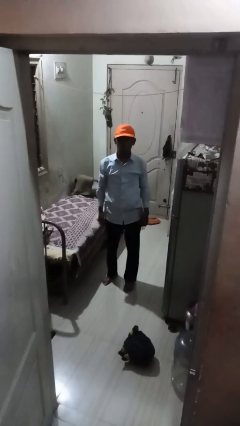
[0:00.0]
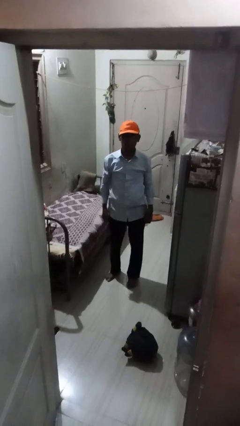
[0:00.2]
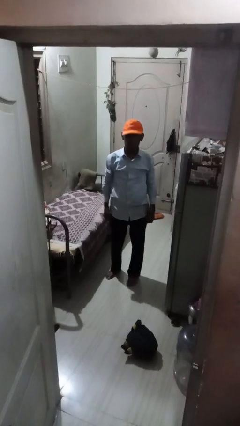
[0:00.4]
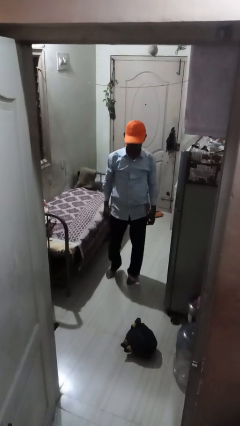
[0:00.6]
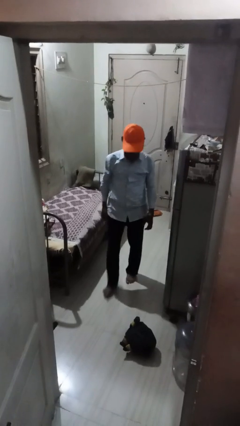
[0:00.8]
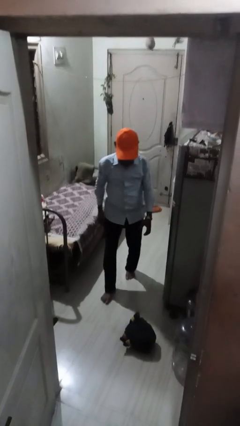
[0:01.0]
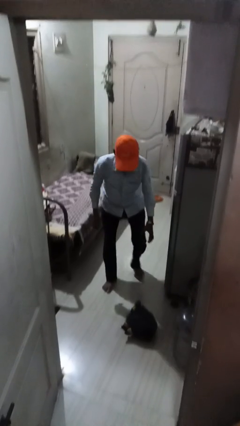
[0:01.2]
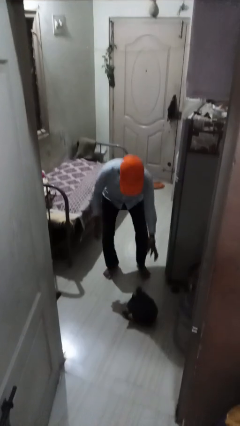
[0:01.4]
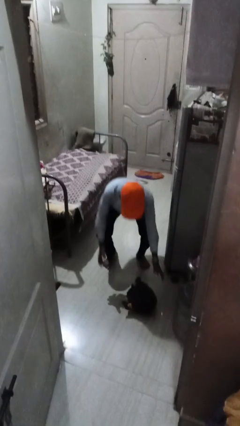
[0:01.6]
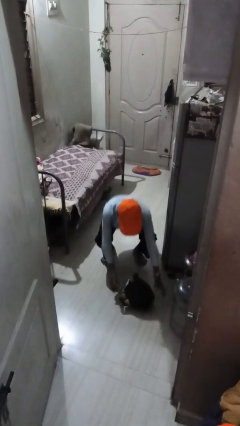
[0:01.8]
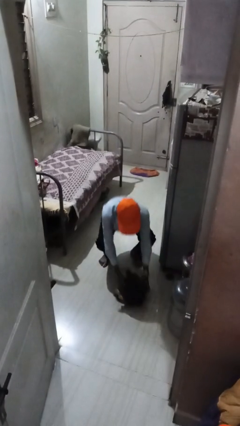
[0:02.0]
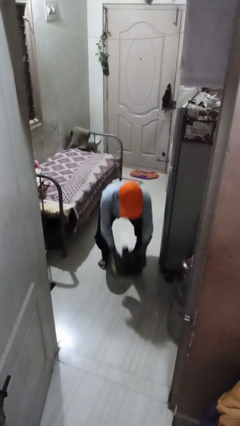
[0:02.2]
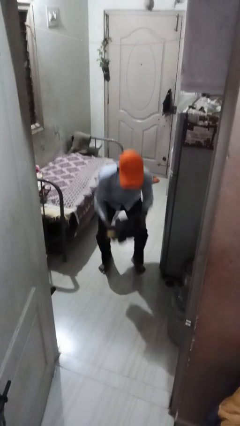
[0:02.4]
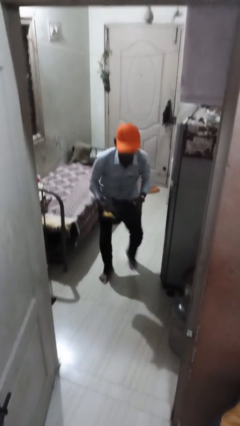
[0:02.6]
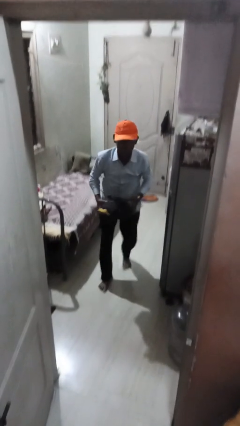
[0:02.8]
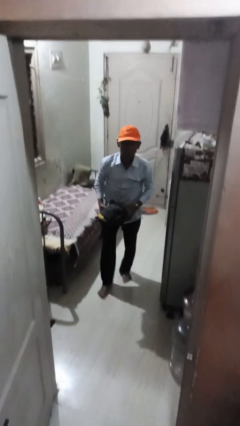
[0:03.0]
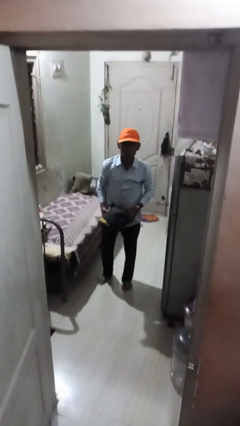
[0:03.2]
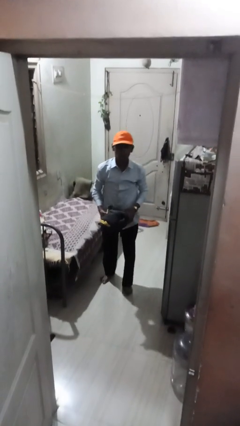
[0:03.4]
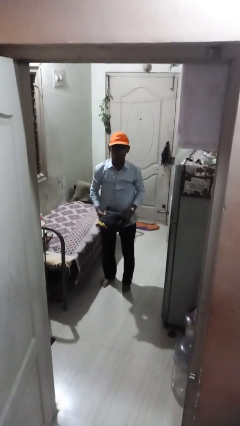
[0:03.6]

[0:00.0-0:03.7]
person picks up object from floor

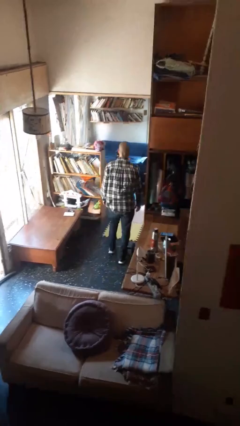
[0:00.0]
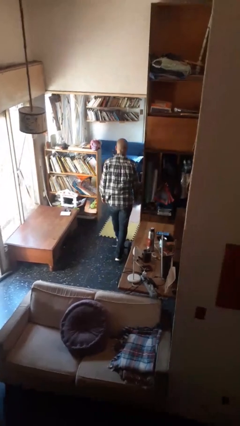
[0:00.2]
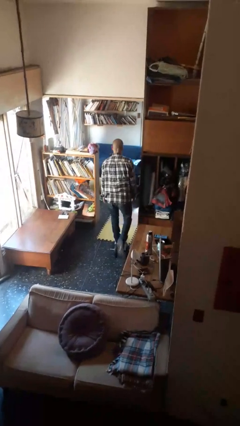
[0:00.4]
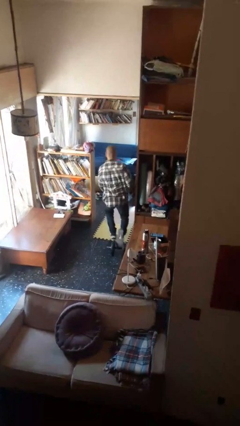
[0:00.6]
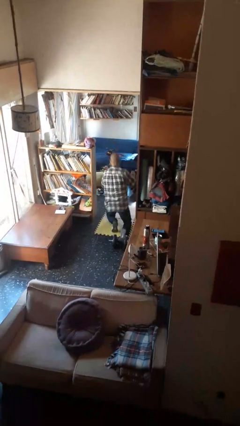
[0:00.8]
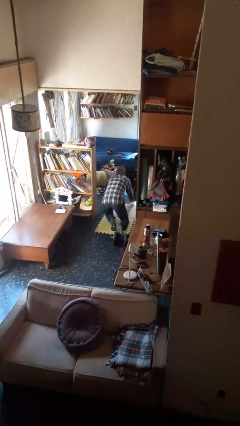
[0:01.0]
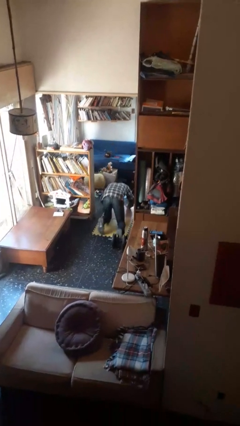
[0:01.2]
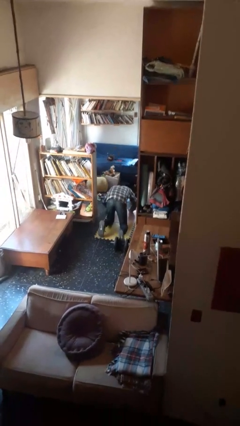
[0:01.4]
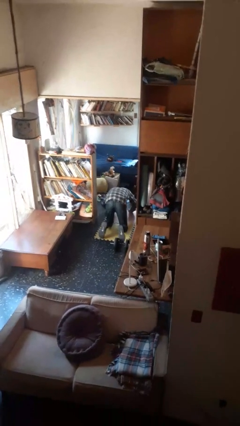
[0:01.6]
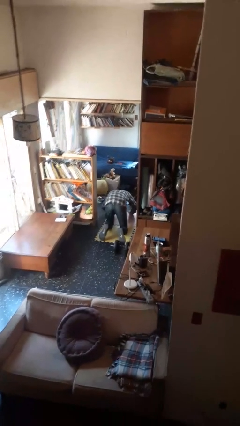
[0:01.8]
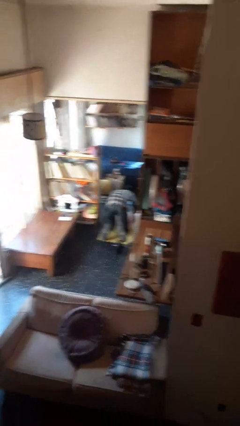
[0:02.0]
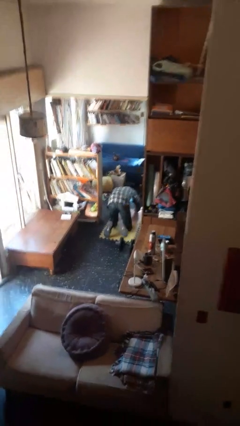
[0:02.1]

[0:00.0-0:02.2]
person trips on object on floor

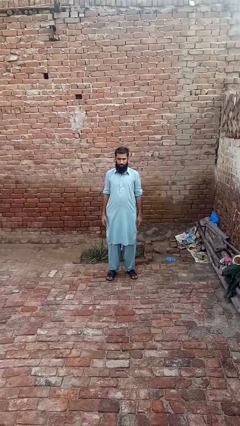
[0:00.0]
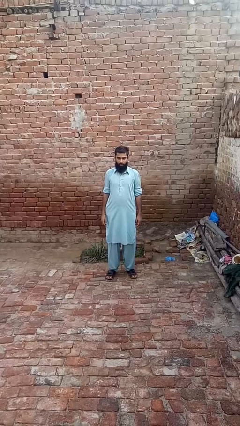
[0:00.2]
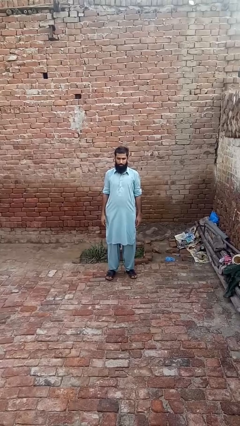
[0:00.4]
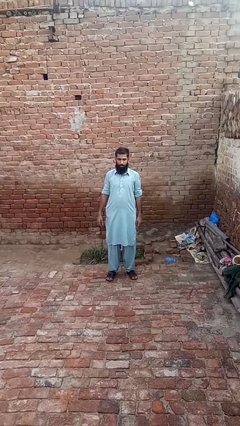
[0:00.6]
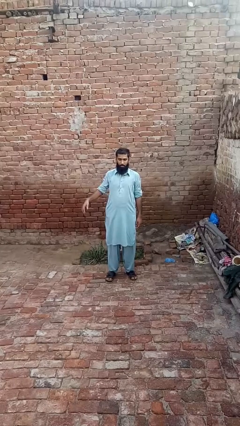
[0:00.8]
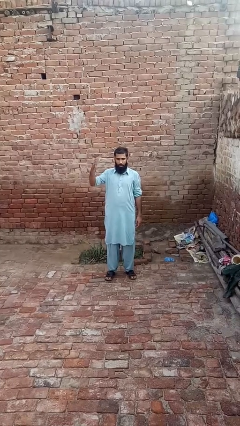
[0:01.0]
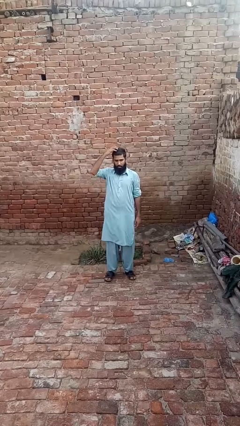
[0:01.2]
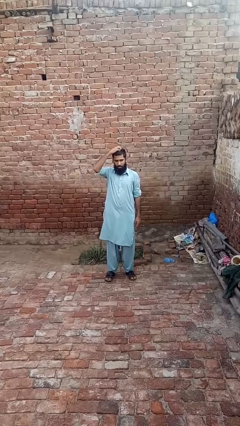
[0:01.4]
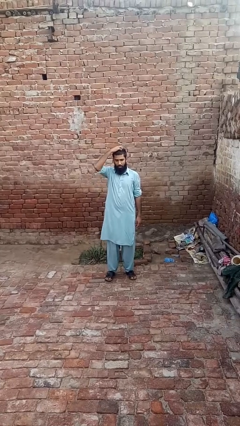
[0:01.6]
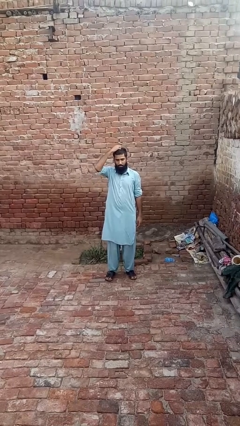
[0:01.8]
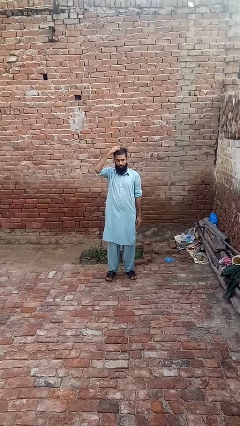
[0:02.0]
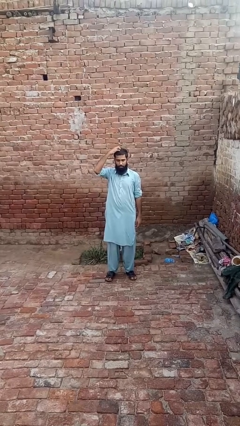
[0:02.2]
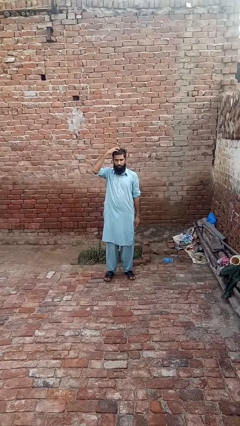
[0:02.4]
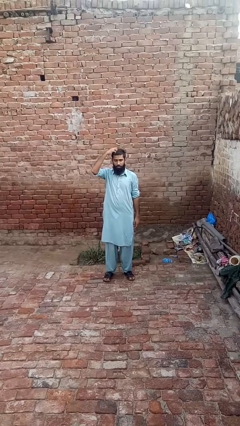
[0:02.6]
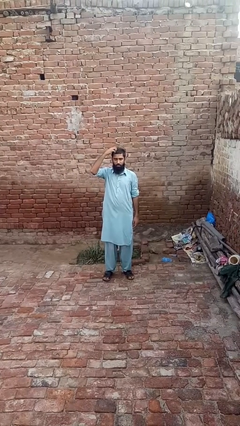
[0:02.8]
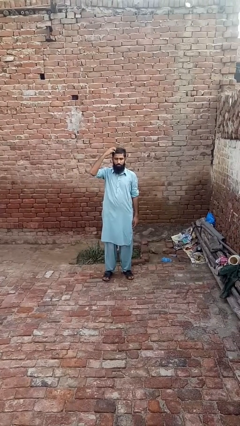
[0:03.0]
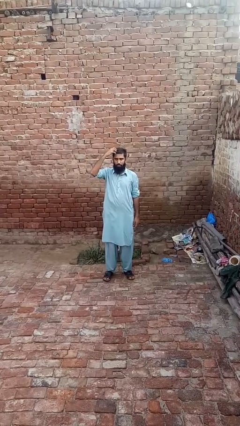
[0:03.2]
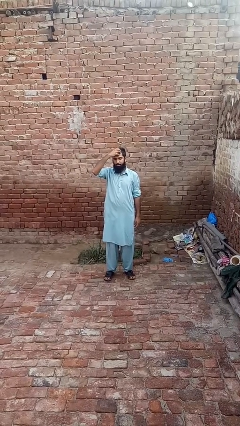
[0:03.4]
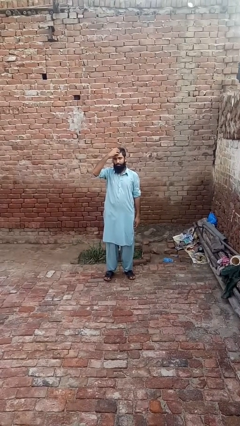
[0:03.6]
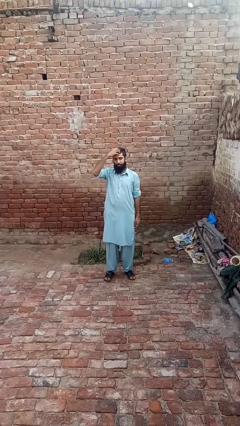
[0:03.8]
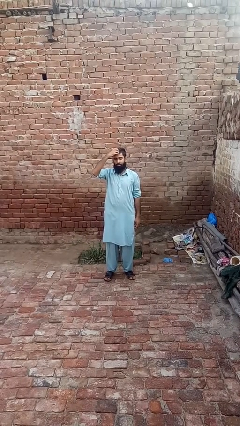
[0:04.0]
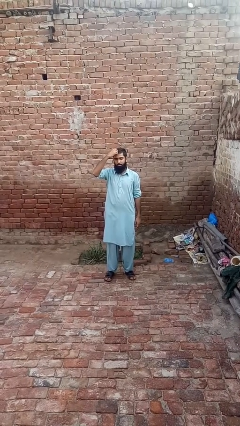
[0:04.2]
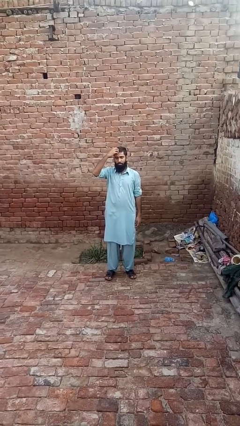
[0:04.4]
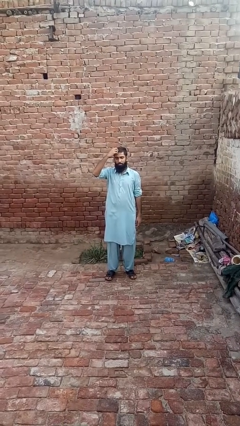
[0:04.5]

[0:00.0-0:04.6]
person scratches face

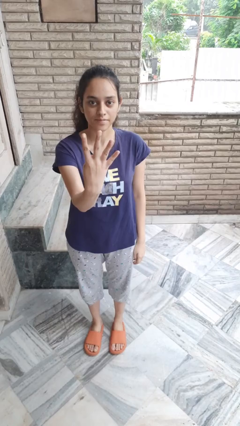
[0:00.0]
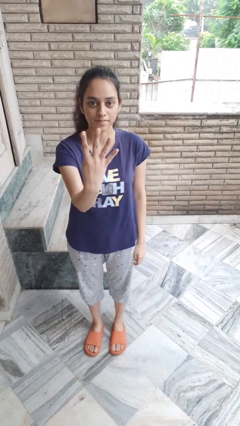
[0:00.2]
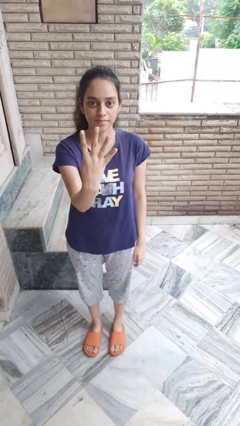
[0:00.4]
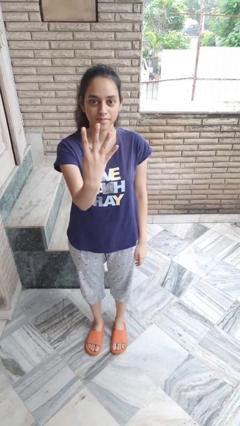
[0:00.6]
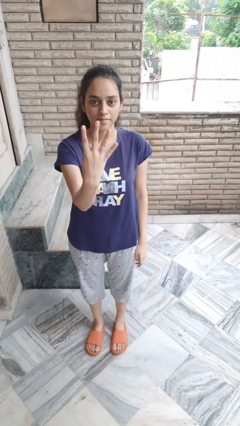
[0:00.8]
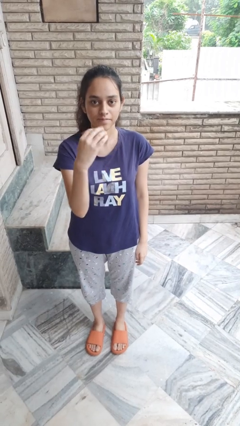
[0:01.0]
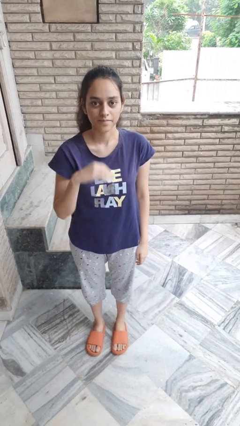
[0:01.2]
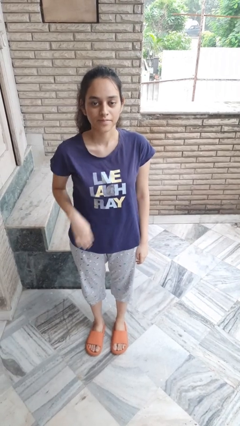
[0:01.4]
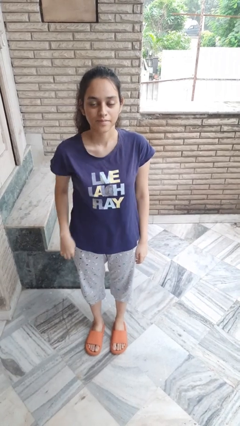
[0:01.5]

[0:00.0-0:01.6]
person gestures number four

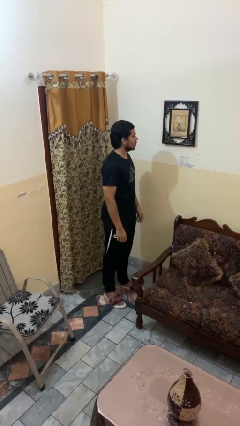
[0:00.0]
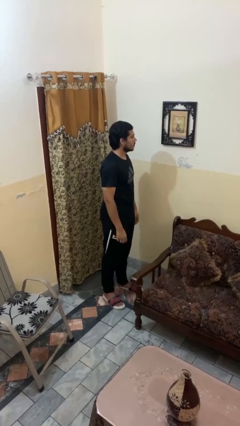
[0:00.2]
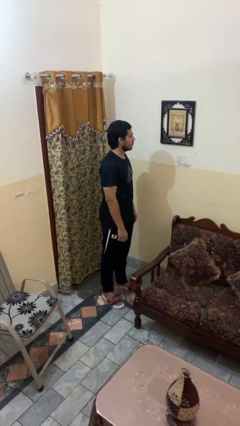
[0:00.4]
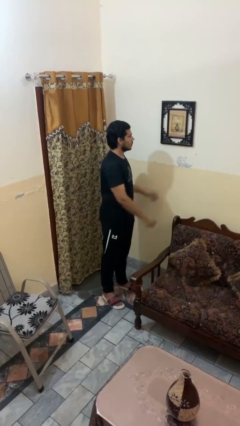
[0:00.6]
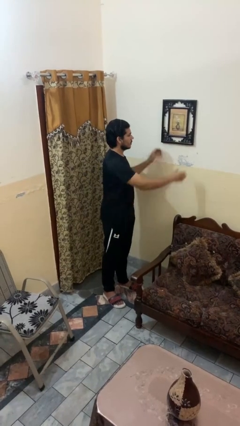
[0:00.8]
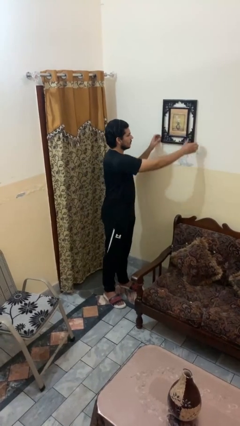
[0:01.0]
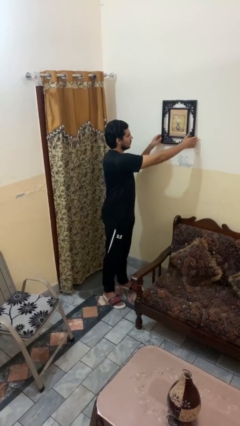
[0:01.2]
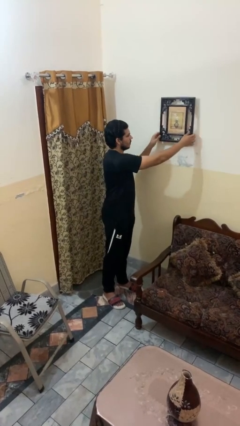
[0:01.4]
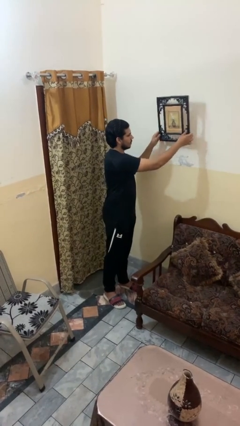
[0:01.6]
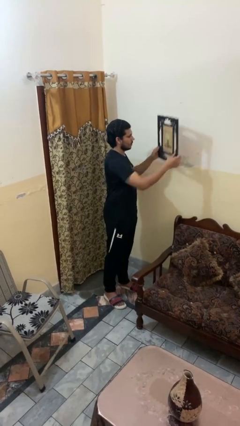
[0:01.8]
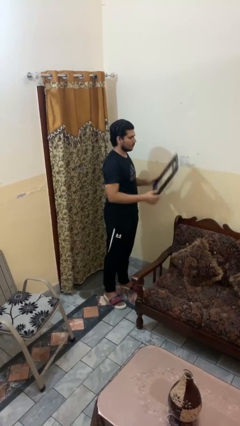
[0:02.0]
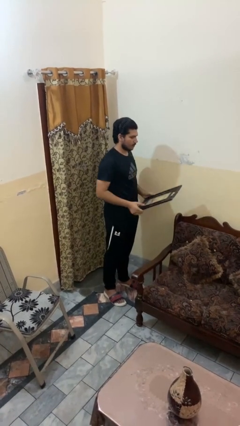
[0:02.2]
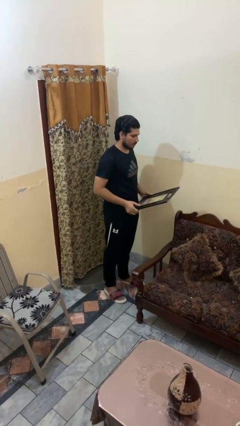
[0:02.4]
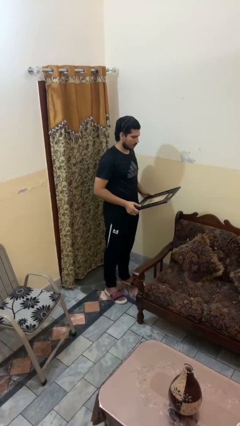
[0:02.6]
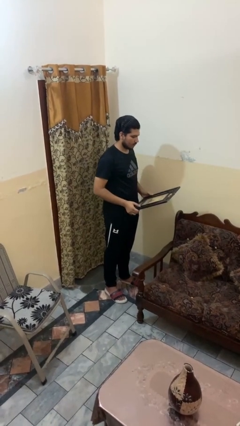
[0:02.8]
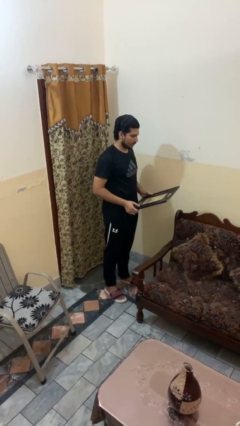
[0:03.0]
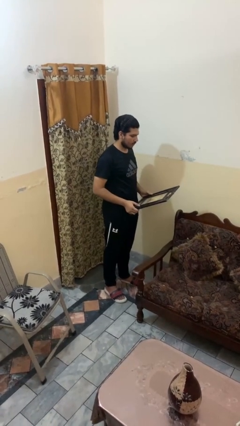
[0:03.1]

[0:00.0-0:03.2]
person takes down picture frame

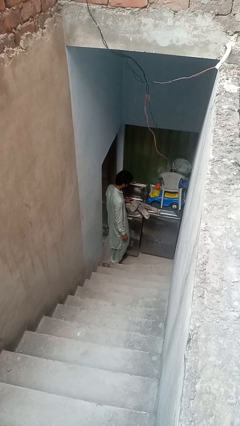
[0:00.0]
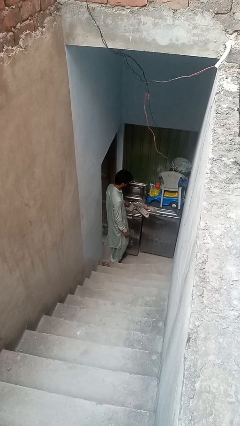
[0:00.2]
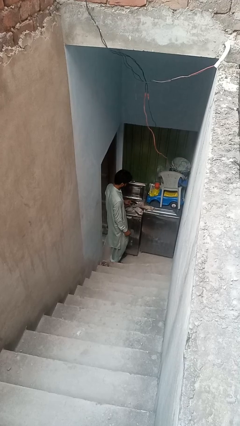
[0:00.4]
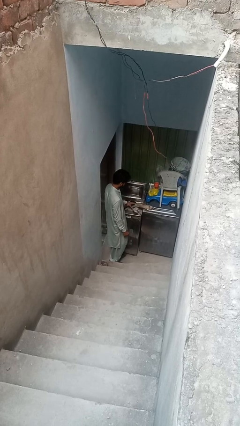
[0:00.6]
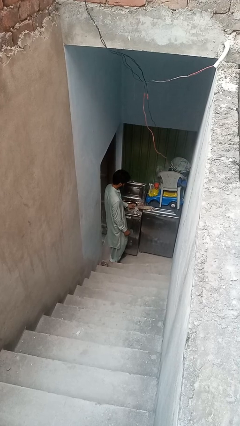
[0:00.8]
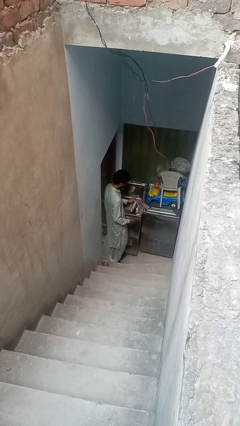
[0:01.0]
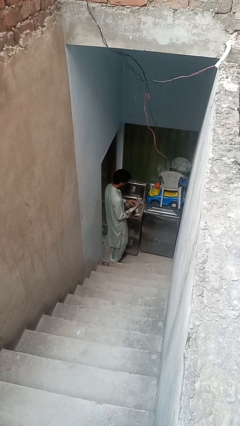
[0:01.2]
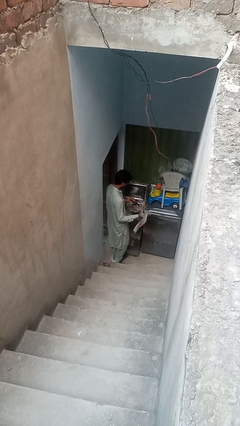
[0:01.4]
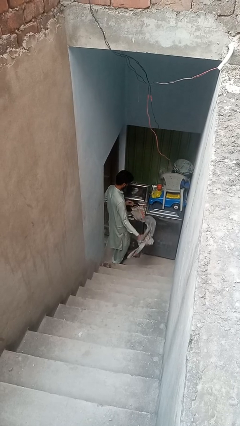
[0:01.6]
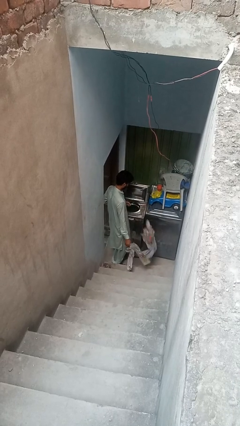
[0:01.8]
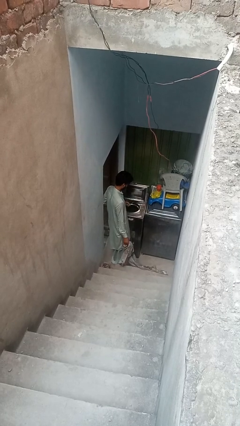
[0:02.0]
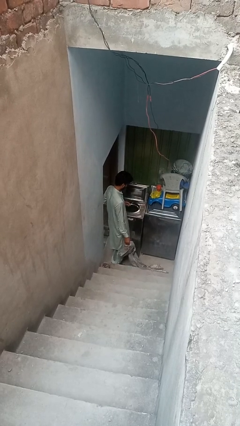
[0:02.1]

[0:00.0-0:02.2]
person unloads clotheswasher

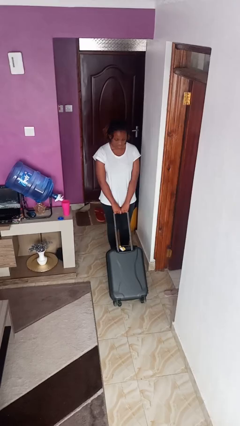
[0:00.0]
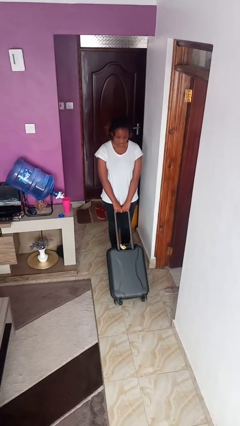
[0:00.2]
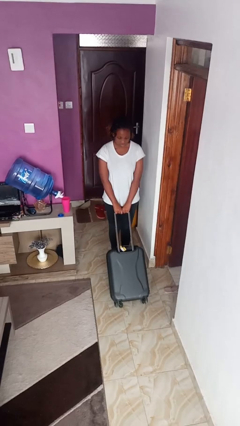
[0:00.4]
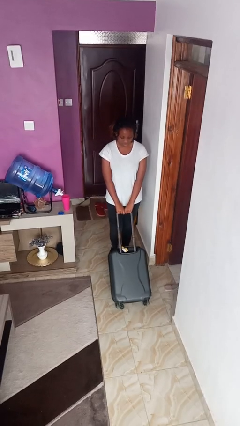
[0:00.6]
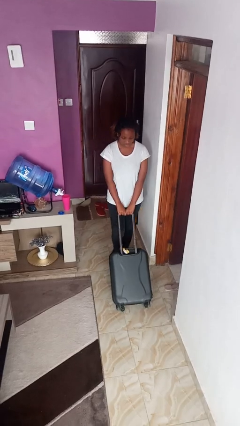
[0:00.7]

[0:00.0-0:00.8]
person pulls wheeled cart
